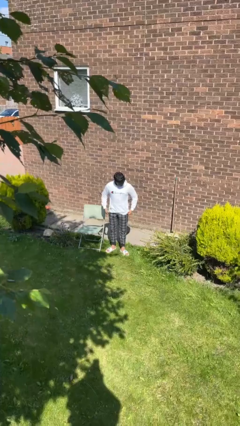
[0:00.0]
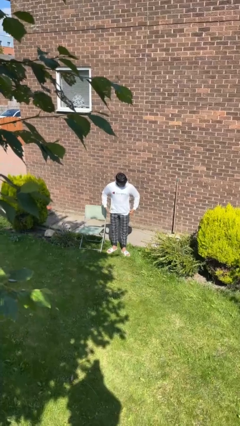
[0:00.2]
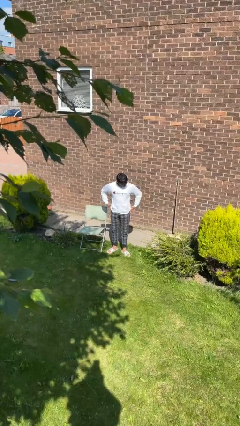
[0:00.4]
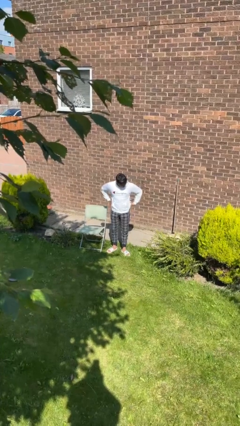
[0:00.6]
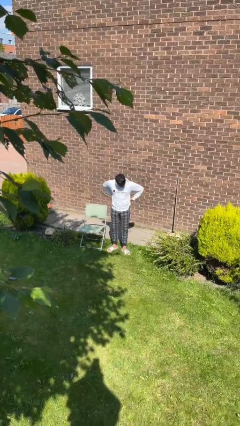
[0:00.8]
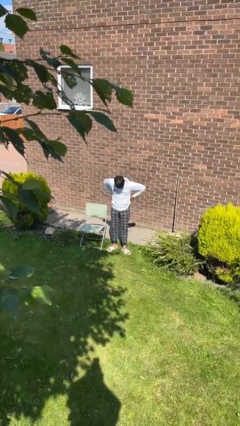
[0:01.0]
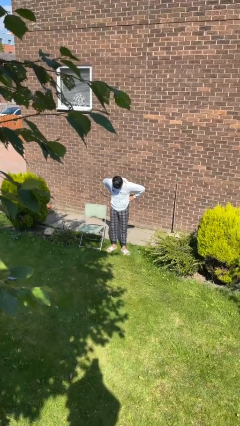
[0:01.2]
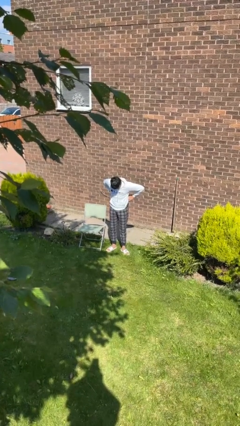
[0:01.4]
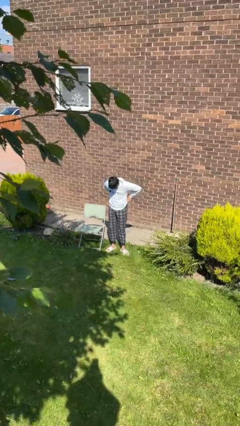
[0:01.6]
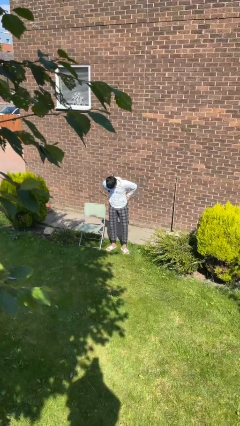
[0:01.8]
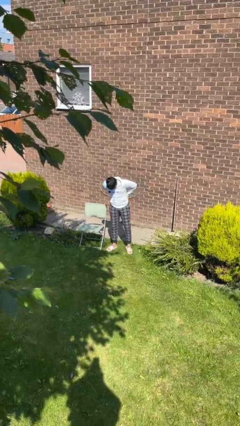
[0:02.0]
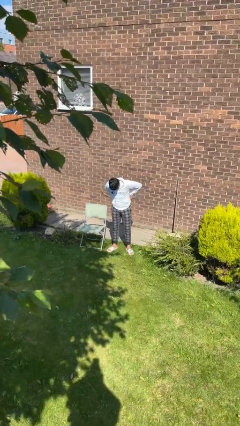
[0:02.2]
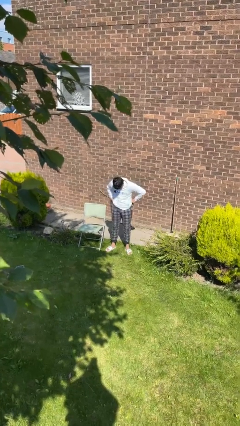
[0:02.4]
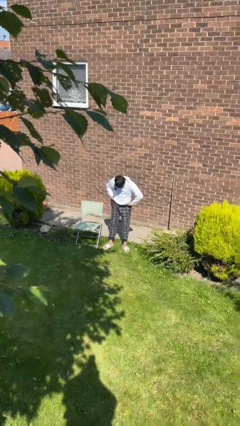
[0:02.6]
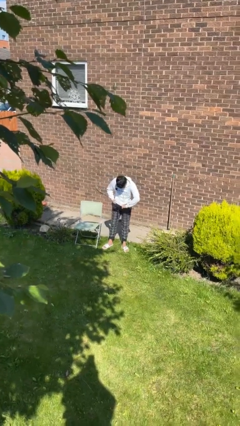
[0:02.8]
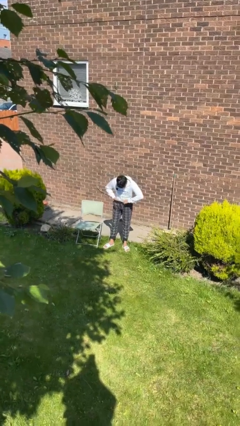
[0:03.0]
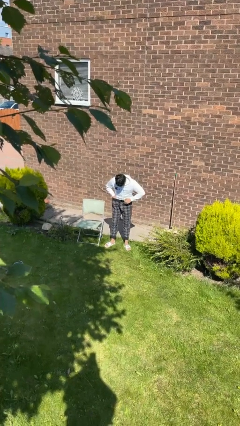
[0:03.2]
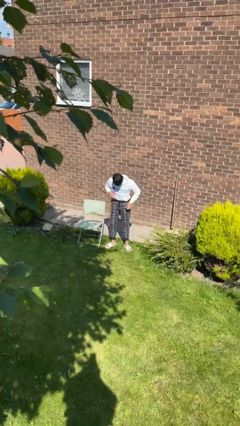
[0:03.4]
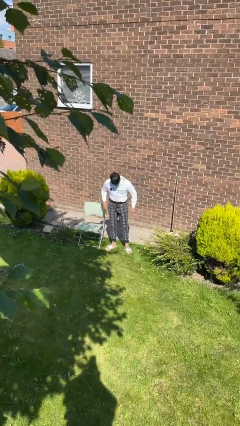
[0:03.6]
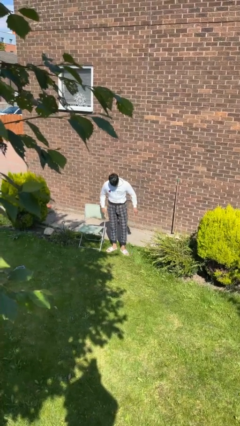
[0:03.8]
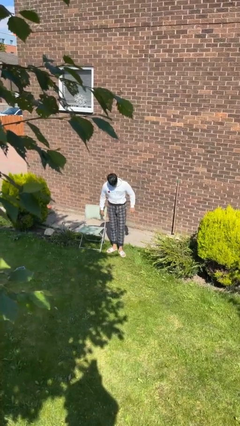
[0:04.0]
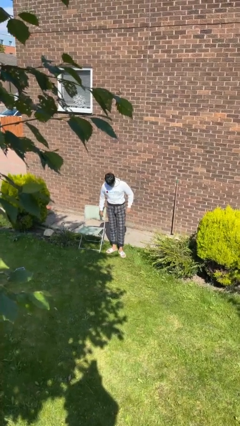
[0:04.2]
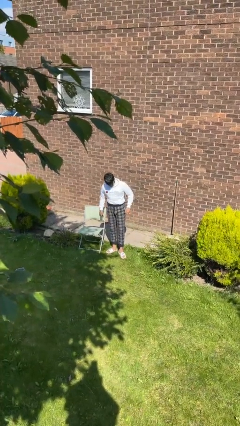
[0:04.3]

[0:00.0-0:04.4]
person tucks in shirt

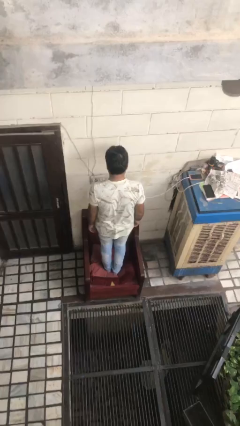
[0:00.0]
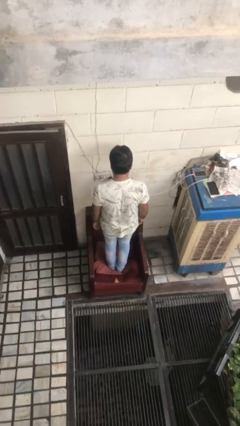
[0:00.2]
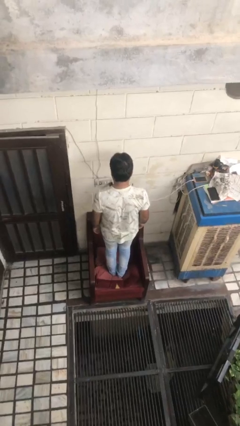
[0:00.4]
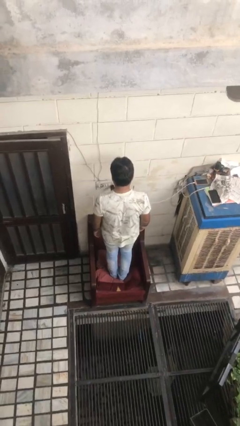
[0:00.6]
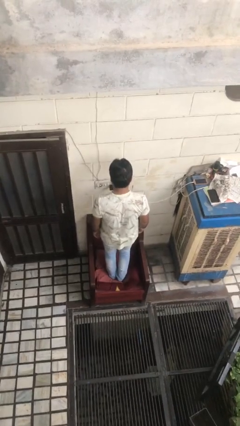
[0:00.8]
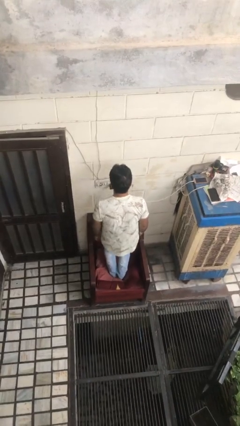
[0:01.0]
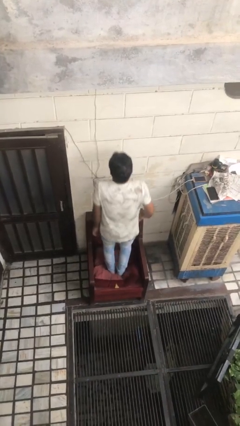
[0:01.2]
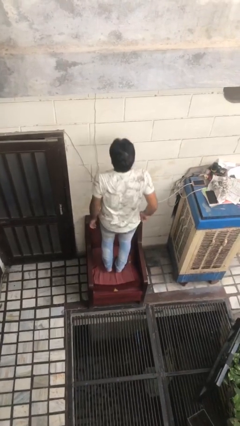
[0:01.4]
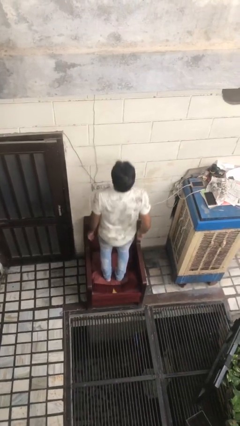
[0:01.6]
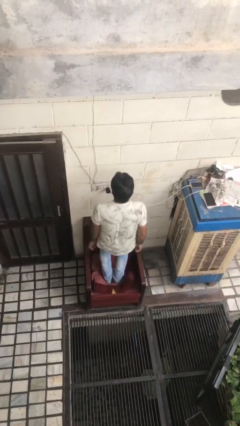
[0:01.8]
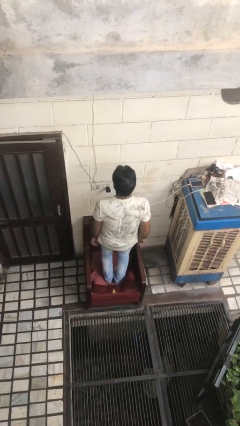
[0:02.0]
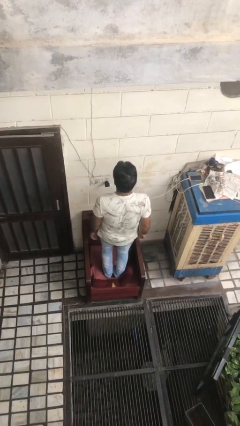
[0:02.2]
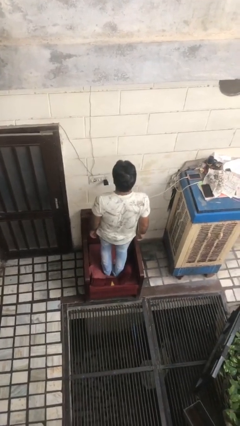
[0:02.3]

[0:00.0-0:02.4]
person jumps on couch

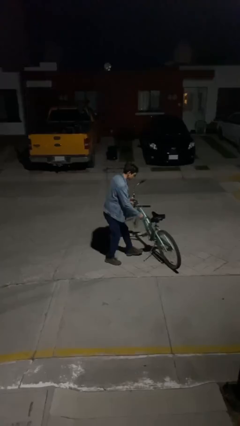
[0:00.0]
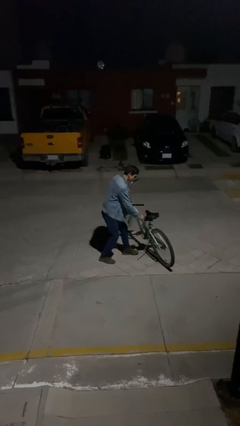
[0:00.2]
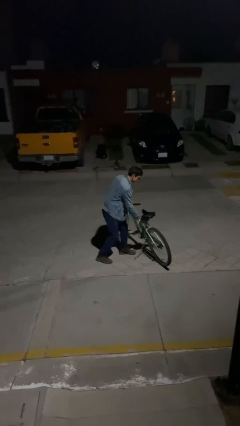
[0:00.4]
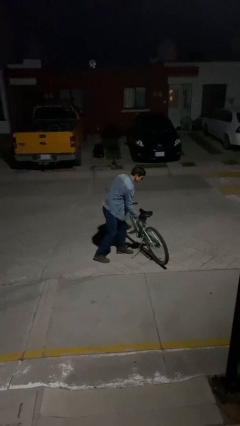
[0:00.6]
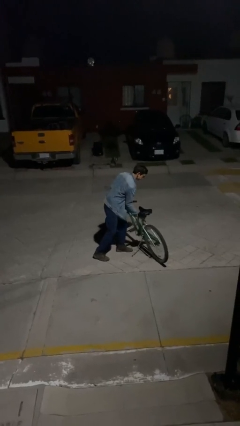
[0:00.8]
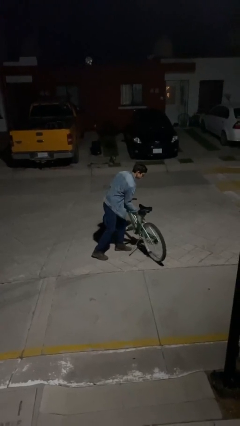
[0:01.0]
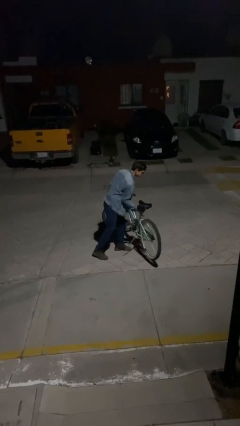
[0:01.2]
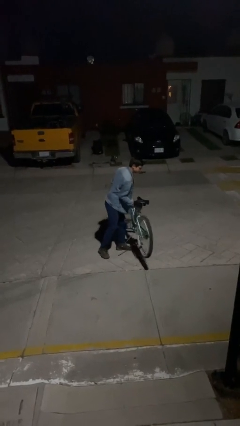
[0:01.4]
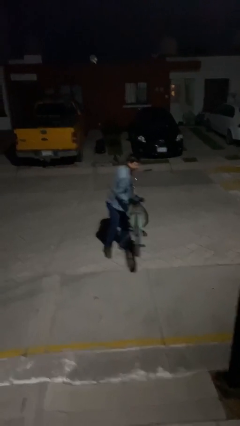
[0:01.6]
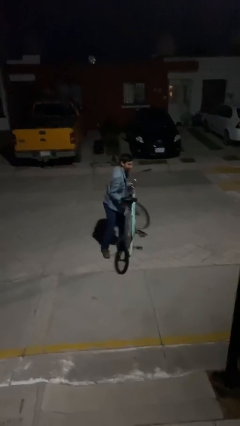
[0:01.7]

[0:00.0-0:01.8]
person picks up object from floor

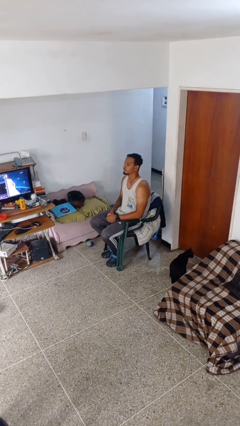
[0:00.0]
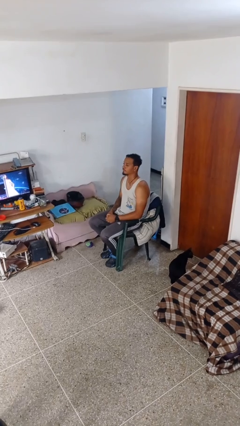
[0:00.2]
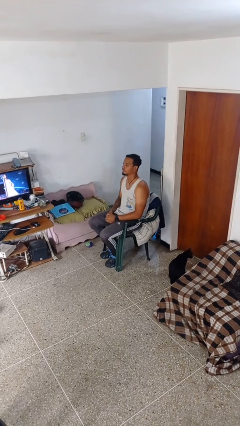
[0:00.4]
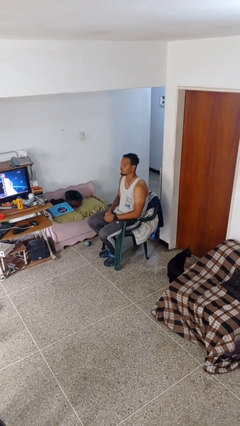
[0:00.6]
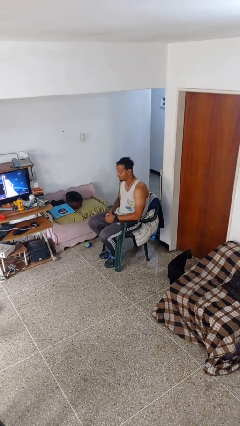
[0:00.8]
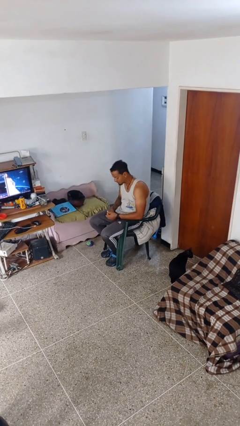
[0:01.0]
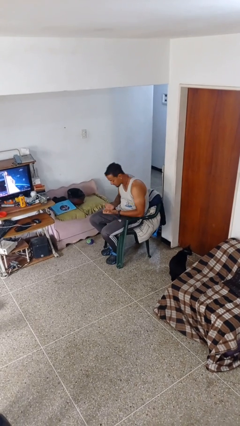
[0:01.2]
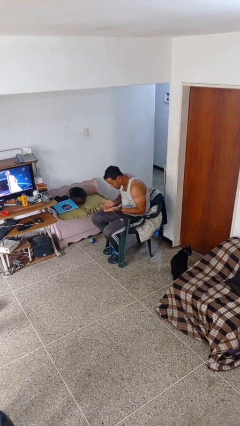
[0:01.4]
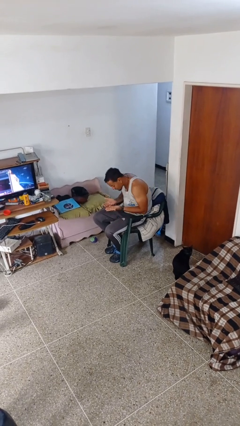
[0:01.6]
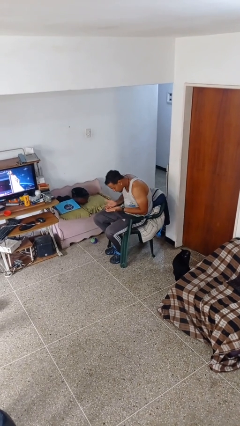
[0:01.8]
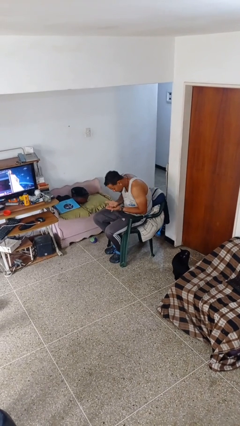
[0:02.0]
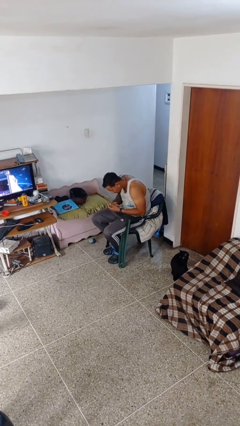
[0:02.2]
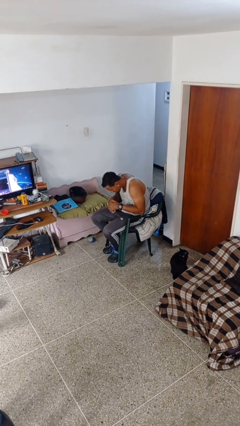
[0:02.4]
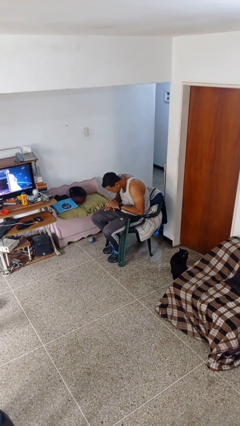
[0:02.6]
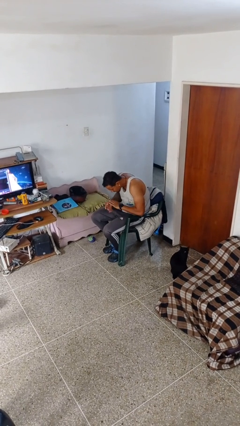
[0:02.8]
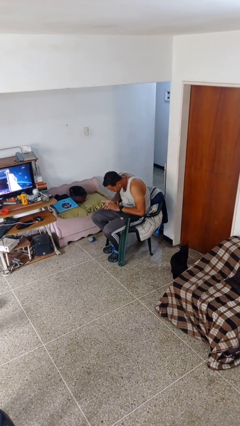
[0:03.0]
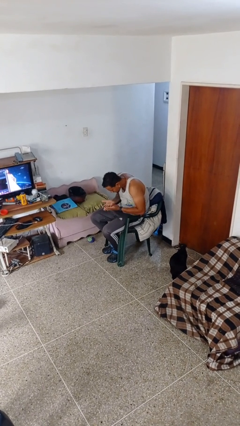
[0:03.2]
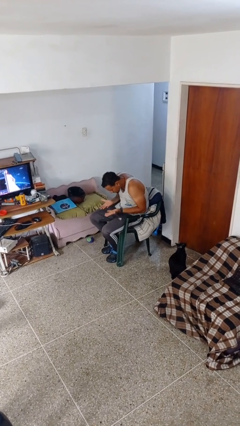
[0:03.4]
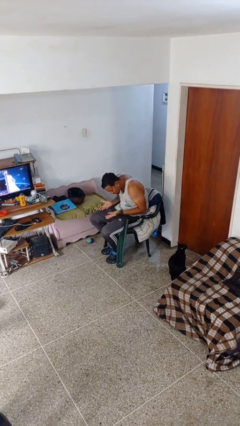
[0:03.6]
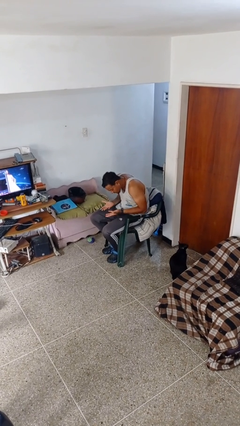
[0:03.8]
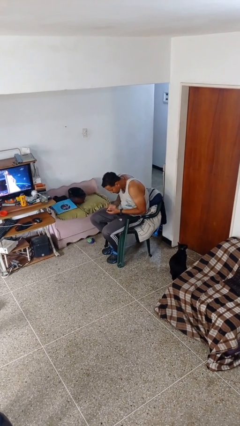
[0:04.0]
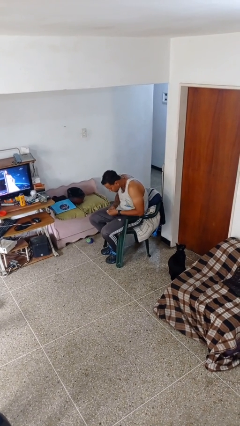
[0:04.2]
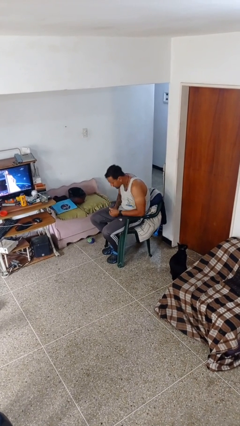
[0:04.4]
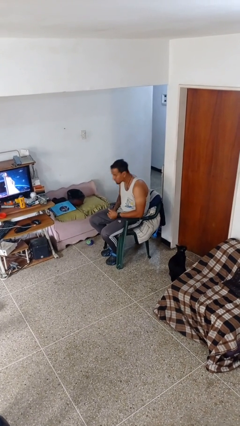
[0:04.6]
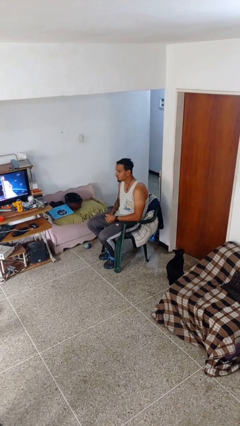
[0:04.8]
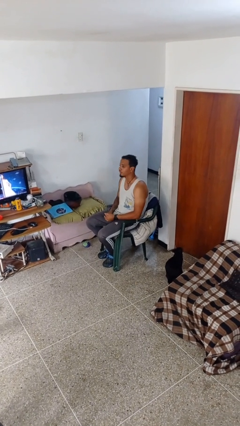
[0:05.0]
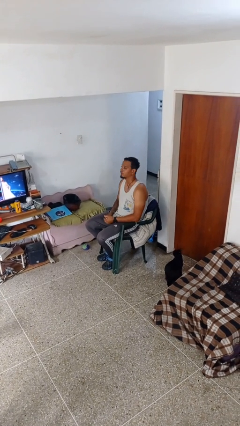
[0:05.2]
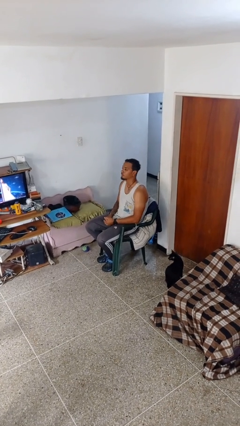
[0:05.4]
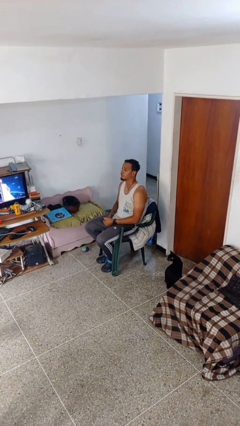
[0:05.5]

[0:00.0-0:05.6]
person looks at hands in lap

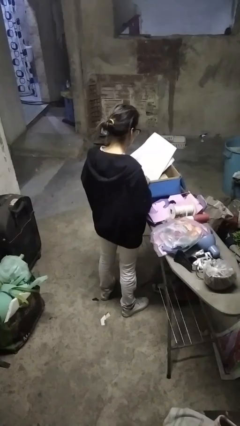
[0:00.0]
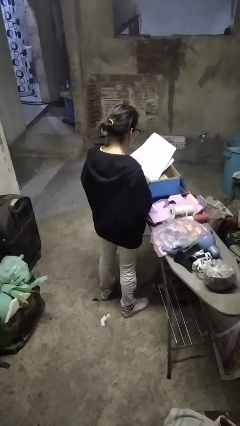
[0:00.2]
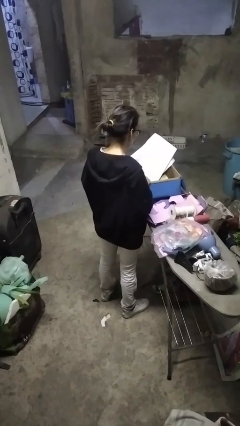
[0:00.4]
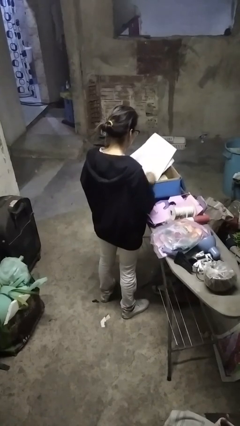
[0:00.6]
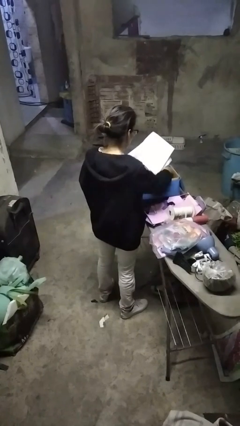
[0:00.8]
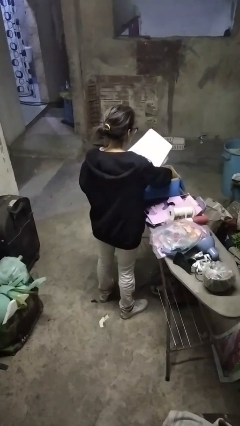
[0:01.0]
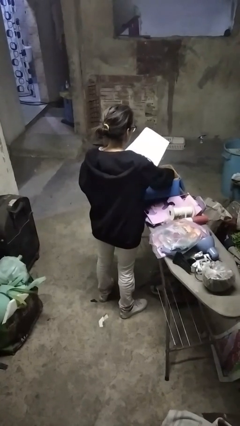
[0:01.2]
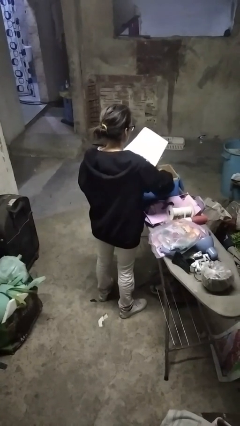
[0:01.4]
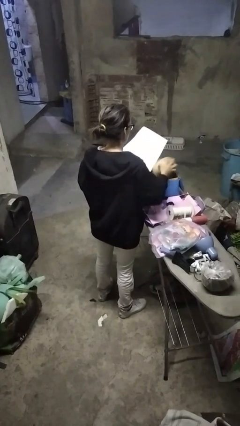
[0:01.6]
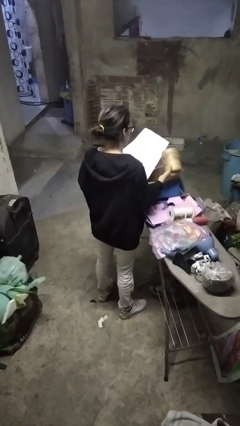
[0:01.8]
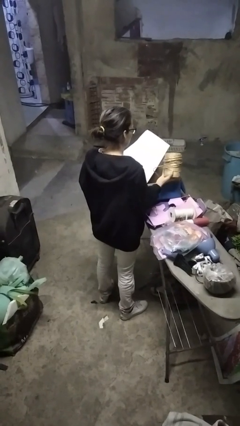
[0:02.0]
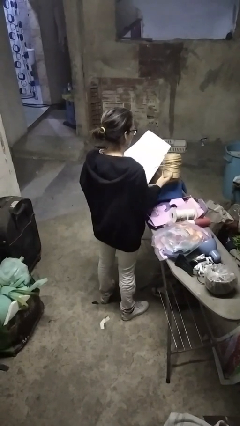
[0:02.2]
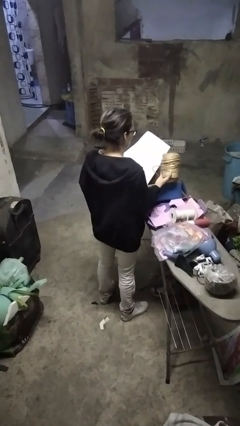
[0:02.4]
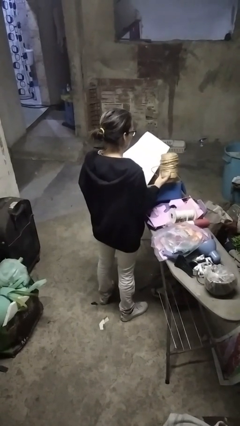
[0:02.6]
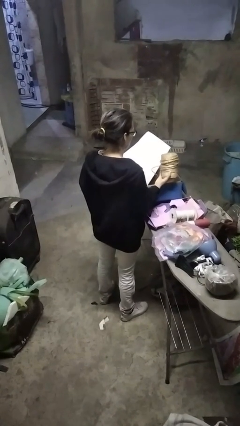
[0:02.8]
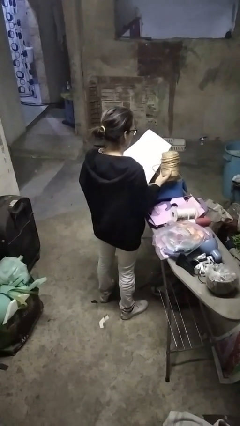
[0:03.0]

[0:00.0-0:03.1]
person takes object from box

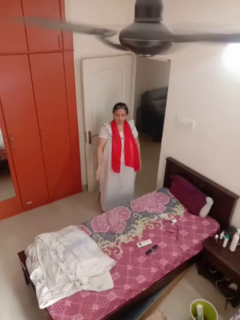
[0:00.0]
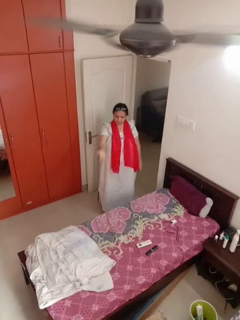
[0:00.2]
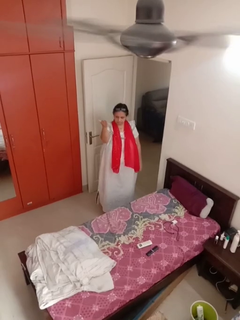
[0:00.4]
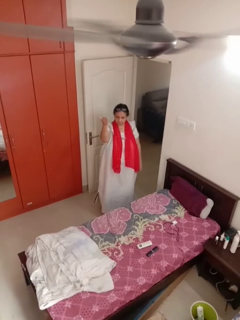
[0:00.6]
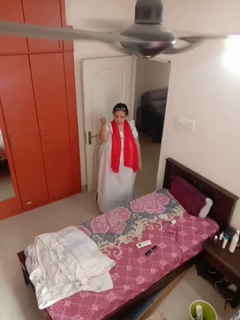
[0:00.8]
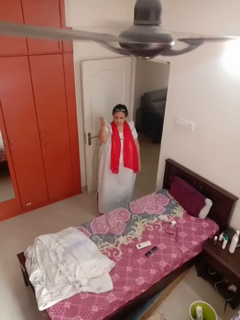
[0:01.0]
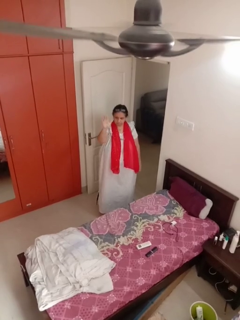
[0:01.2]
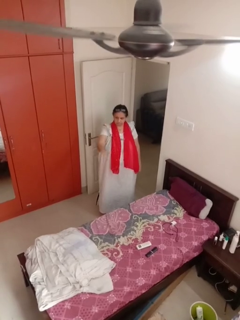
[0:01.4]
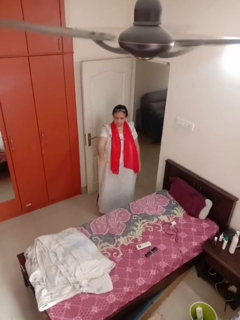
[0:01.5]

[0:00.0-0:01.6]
person gestures swipe up
